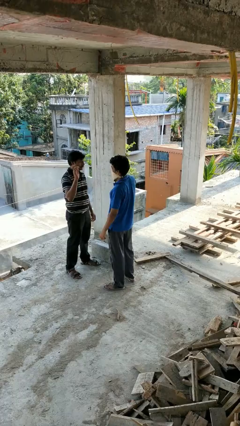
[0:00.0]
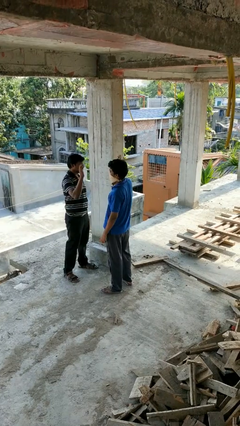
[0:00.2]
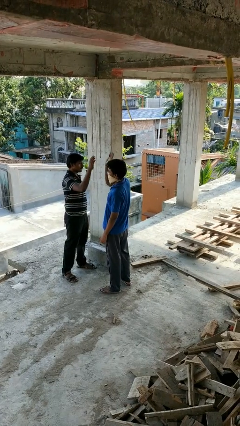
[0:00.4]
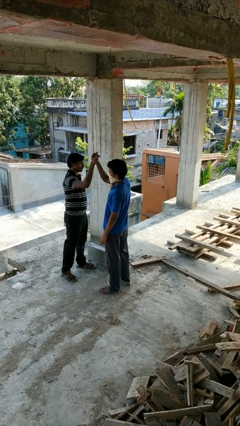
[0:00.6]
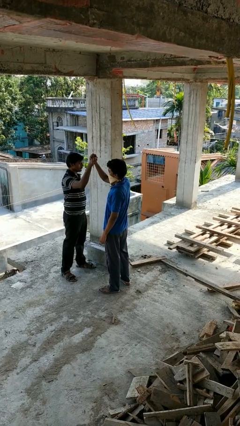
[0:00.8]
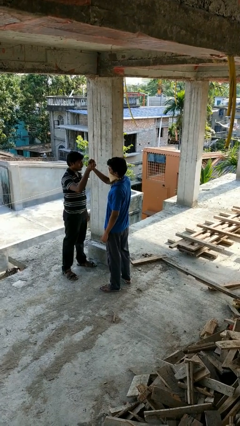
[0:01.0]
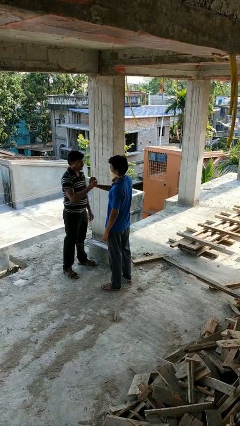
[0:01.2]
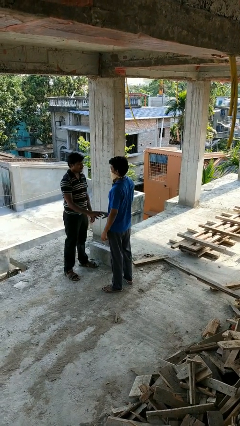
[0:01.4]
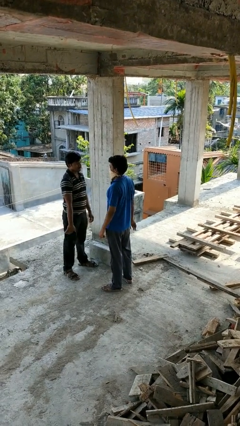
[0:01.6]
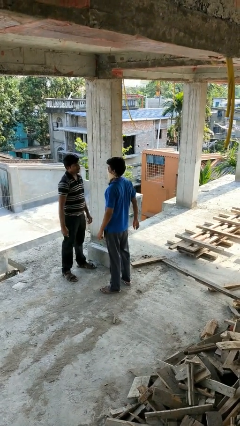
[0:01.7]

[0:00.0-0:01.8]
person highfives hand

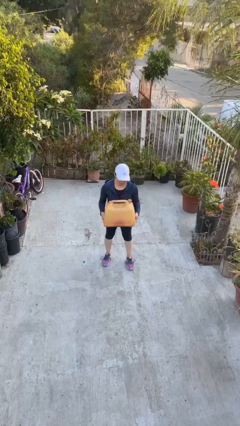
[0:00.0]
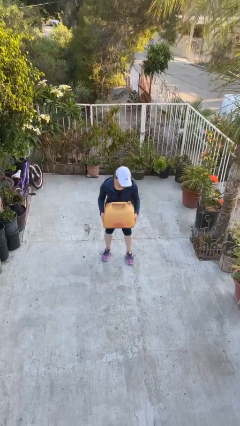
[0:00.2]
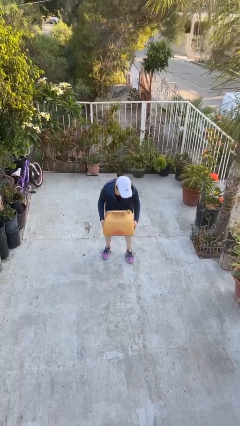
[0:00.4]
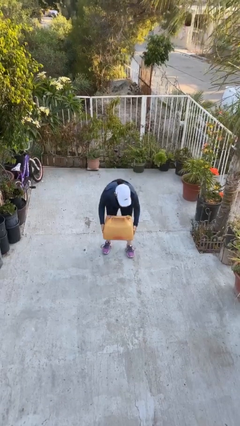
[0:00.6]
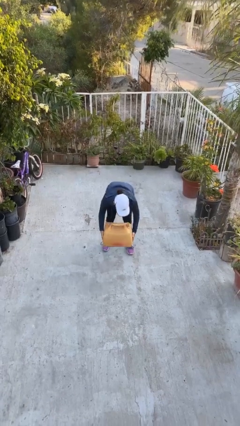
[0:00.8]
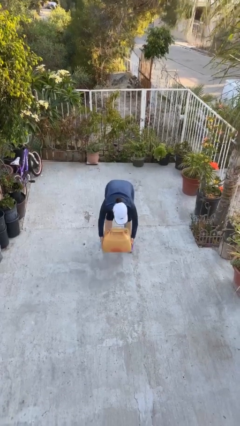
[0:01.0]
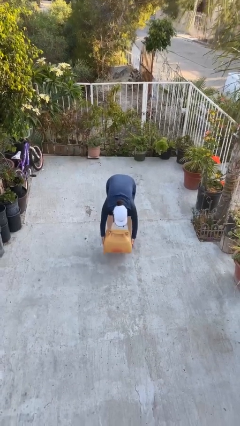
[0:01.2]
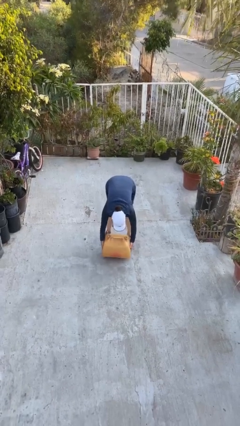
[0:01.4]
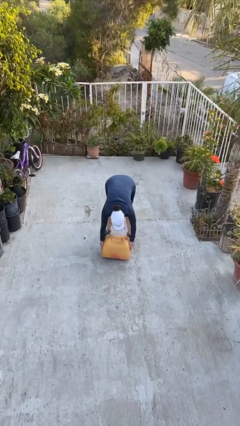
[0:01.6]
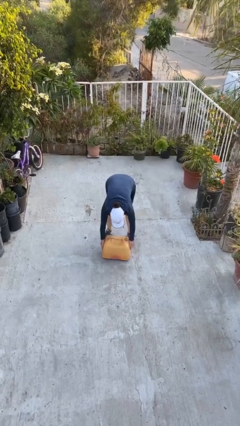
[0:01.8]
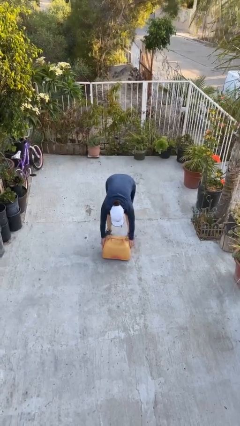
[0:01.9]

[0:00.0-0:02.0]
person puts down object on floor

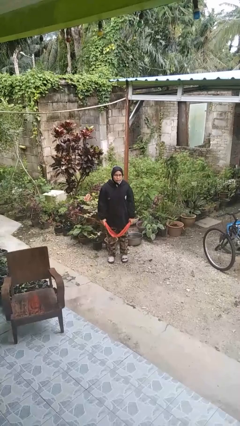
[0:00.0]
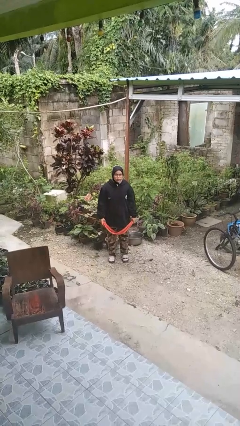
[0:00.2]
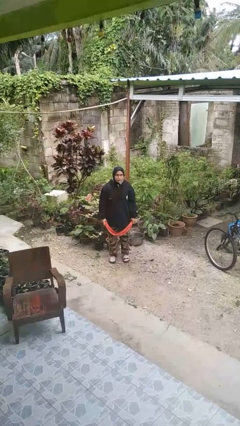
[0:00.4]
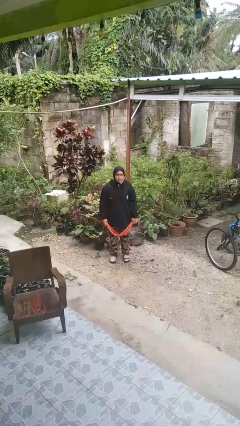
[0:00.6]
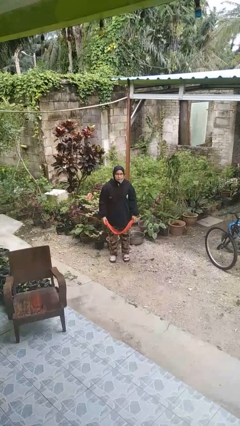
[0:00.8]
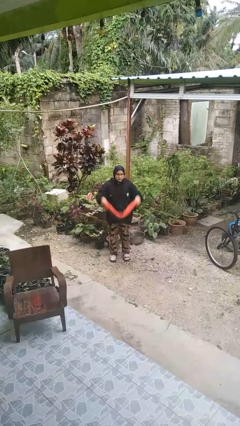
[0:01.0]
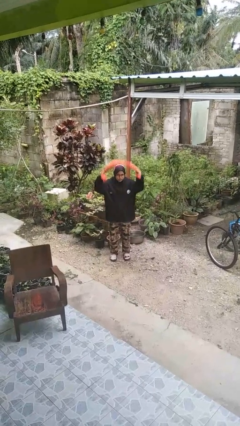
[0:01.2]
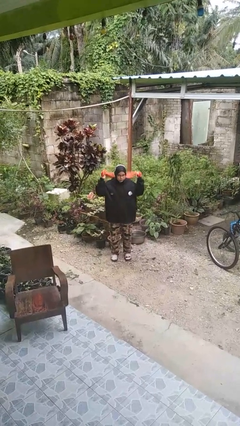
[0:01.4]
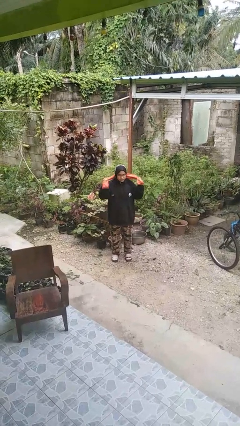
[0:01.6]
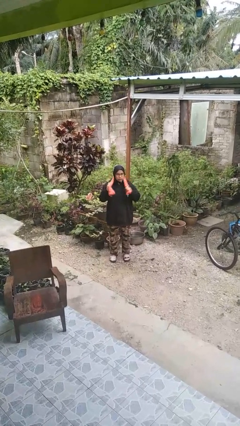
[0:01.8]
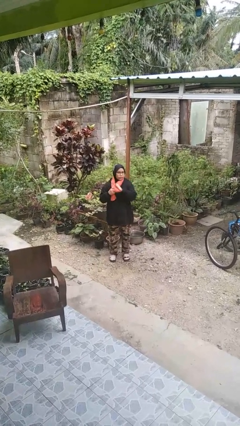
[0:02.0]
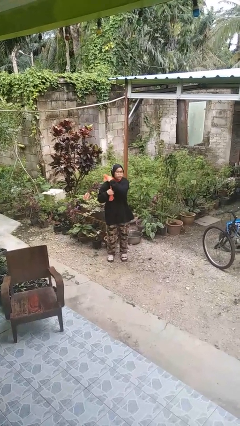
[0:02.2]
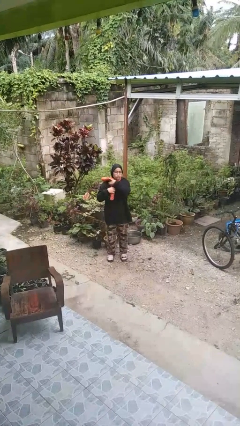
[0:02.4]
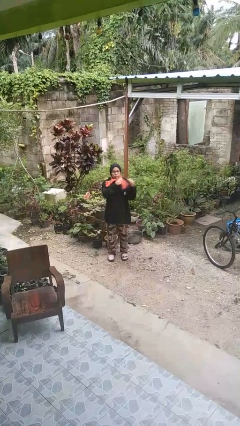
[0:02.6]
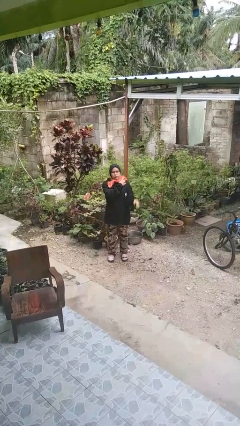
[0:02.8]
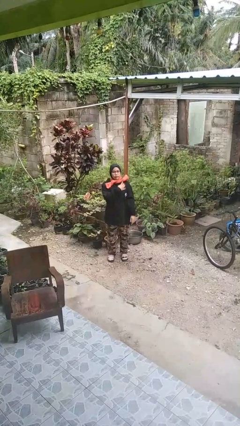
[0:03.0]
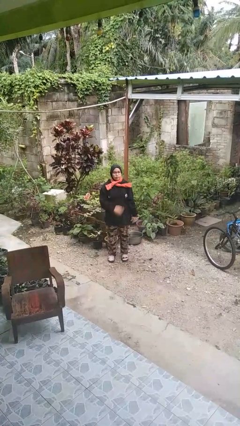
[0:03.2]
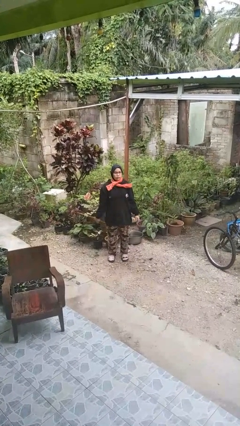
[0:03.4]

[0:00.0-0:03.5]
person puts on scarf

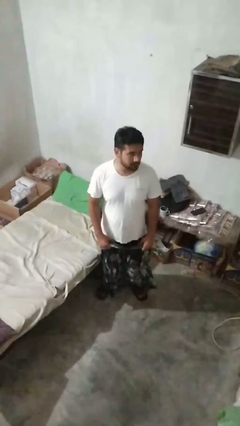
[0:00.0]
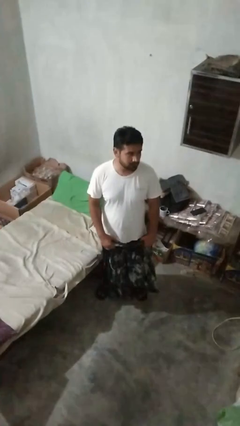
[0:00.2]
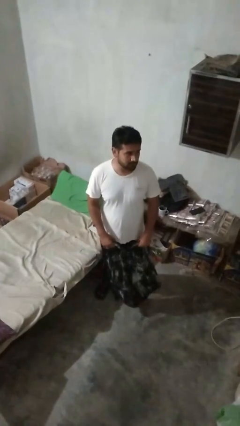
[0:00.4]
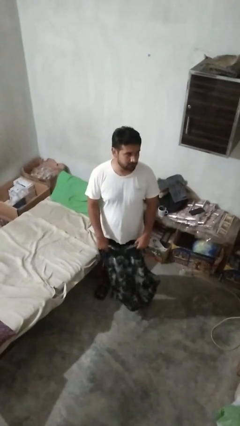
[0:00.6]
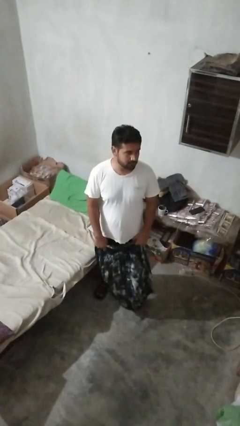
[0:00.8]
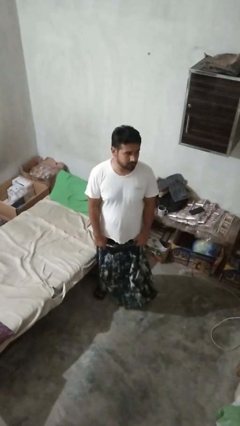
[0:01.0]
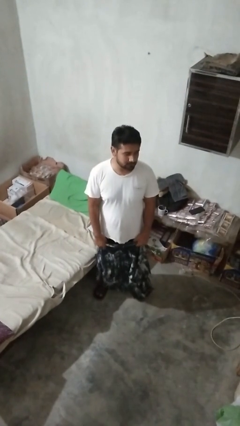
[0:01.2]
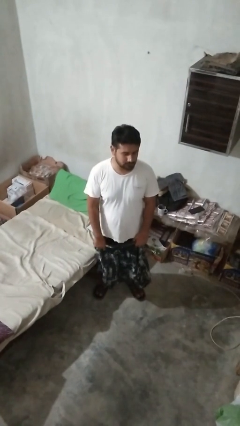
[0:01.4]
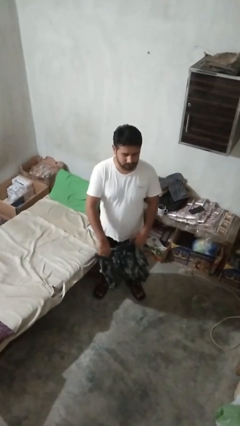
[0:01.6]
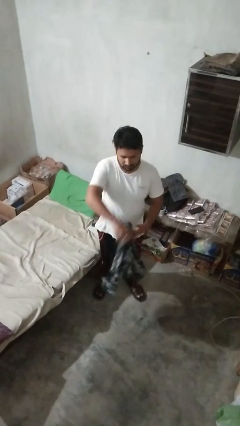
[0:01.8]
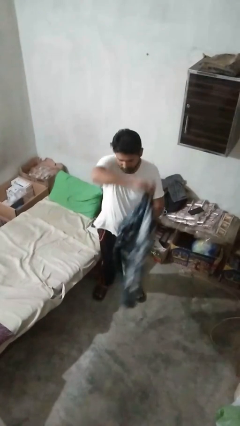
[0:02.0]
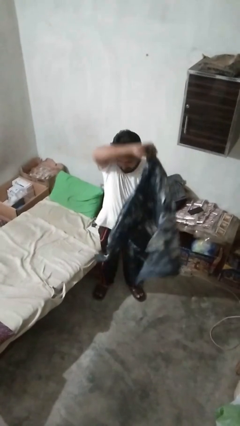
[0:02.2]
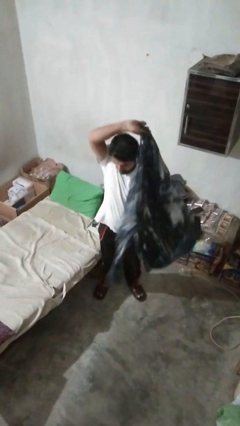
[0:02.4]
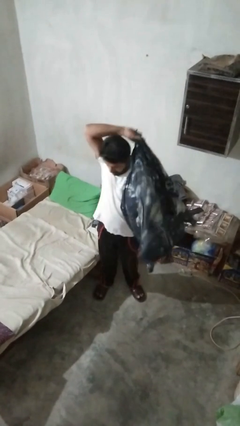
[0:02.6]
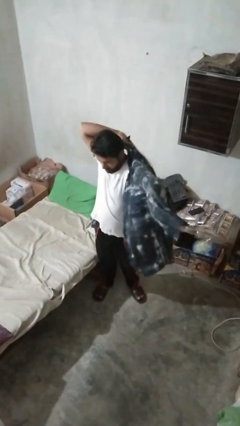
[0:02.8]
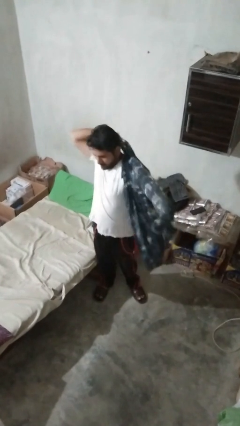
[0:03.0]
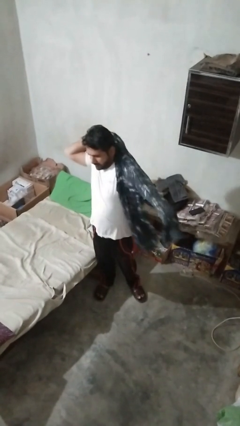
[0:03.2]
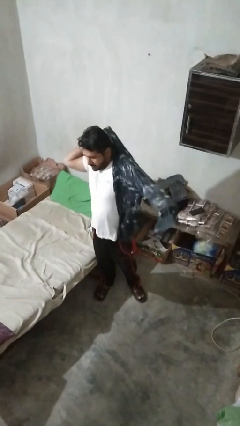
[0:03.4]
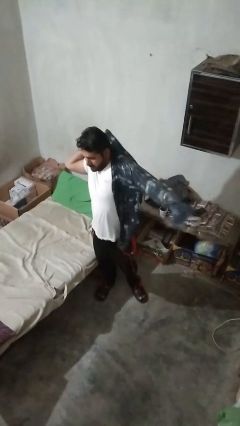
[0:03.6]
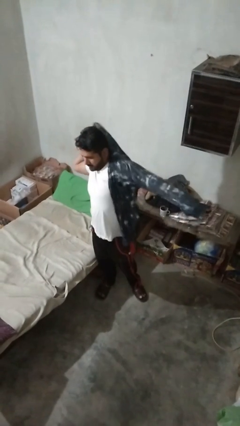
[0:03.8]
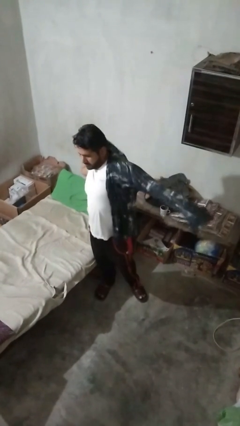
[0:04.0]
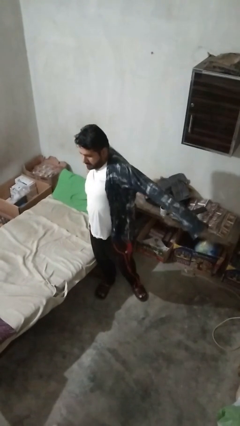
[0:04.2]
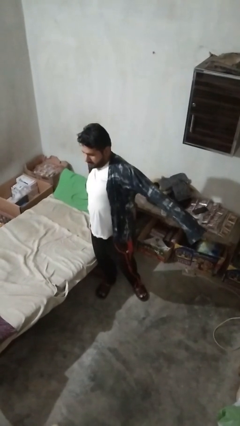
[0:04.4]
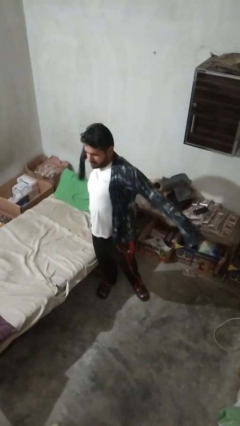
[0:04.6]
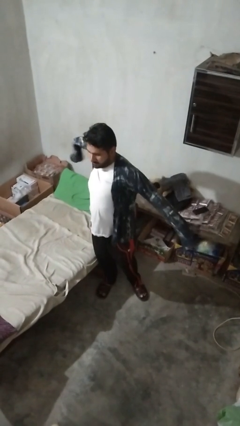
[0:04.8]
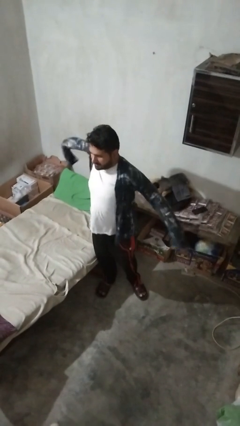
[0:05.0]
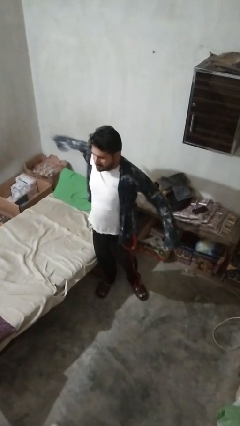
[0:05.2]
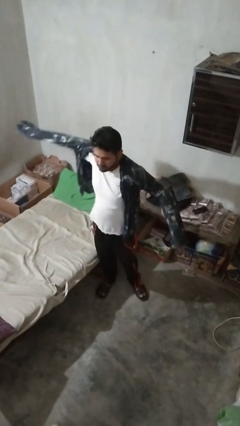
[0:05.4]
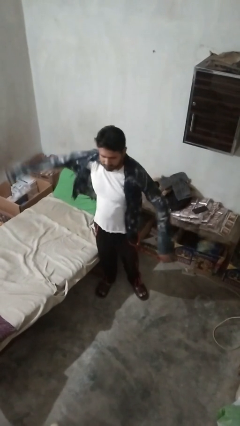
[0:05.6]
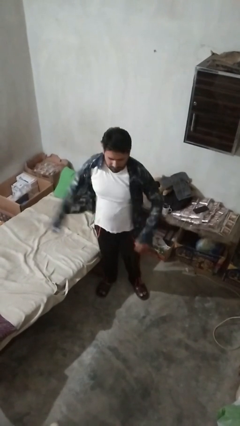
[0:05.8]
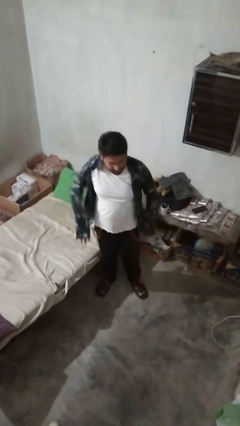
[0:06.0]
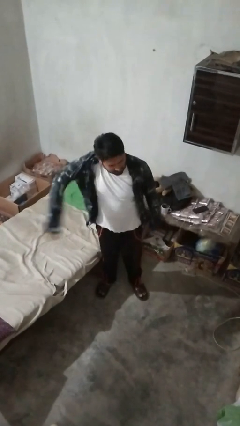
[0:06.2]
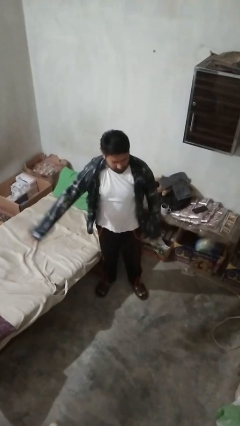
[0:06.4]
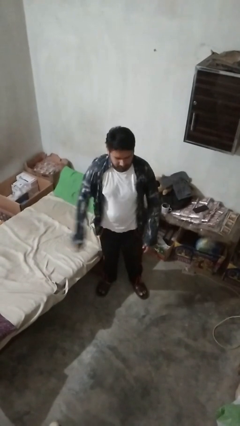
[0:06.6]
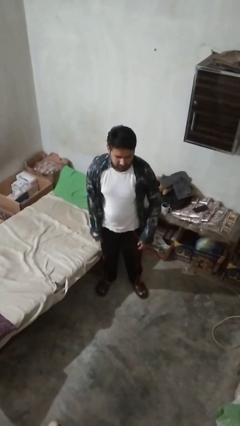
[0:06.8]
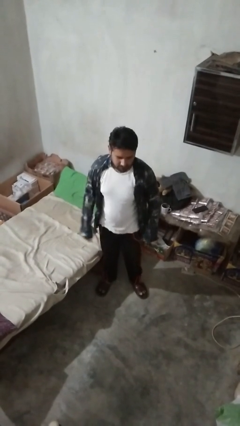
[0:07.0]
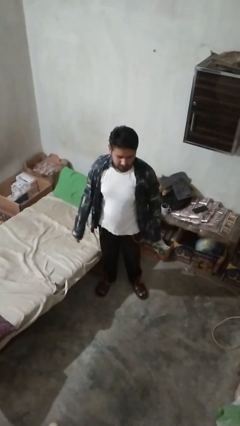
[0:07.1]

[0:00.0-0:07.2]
person puts on shirt

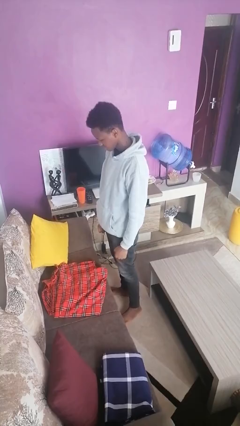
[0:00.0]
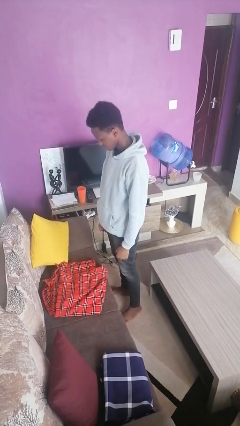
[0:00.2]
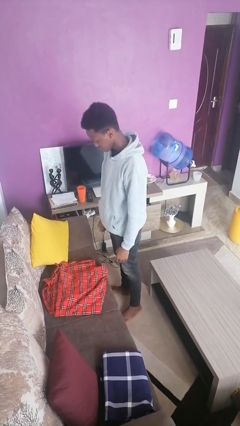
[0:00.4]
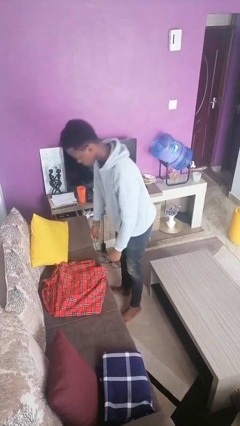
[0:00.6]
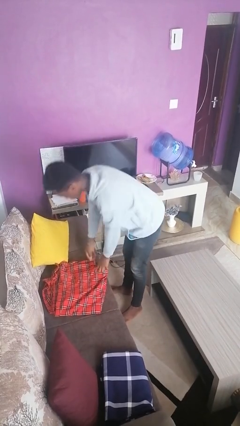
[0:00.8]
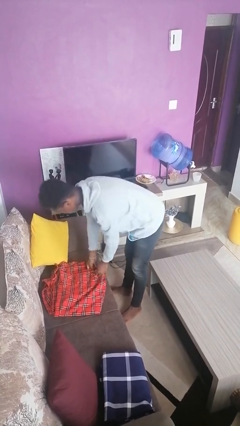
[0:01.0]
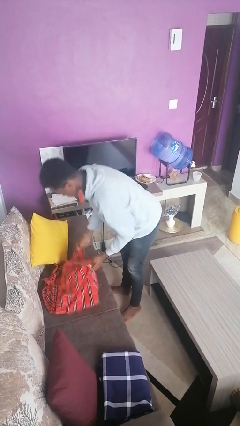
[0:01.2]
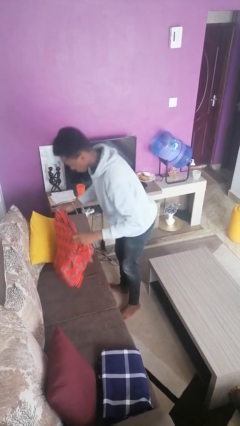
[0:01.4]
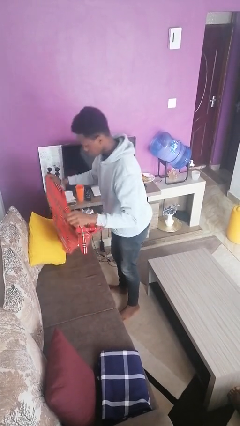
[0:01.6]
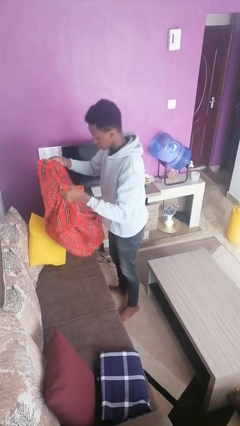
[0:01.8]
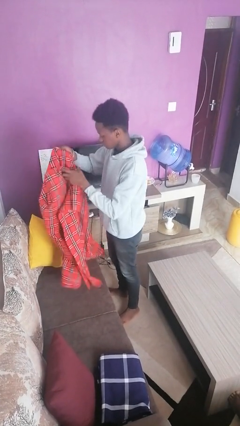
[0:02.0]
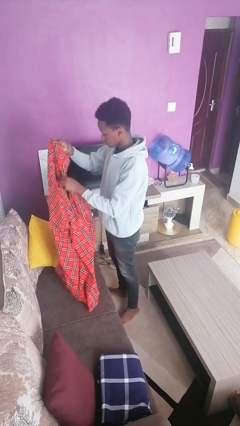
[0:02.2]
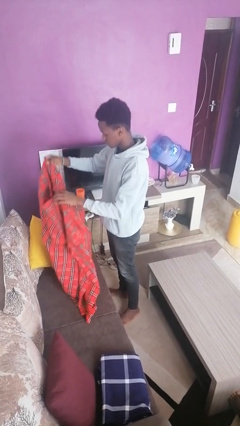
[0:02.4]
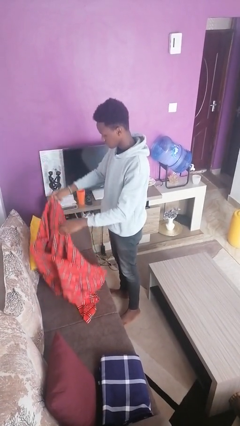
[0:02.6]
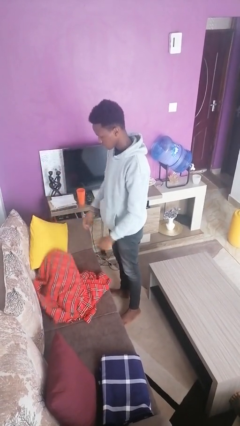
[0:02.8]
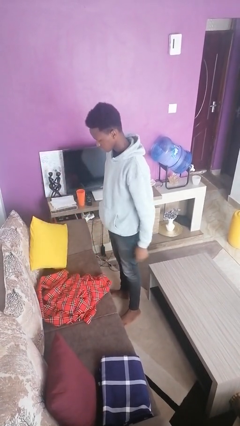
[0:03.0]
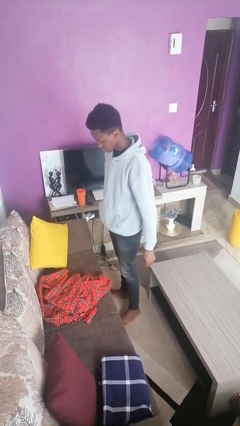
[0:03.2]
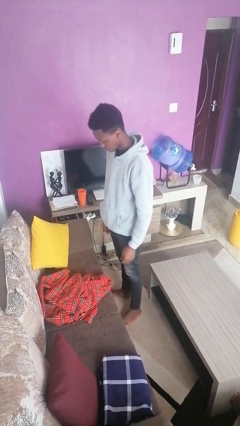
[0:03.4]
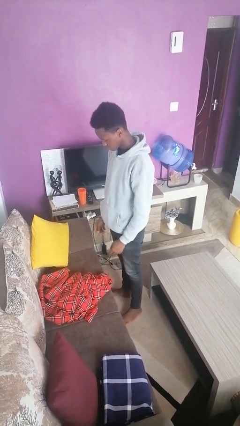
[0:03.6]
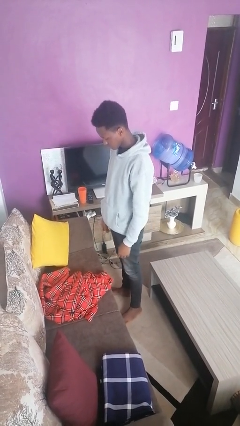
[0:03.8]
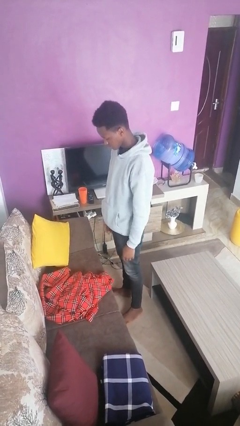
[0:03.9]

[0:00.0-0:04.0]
person unfolds blanket
